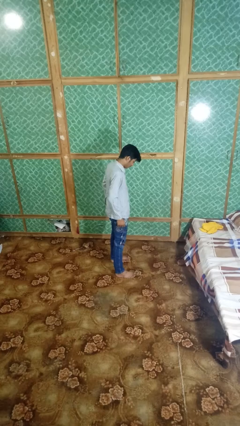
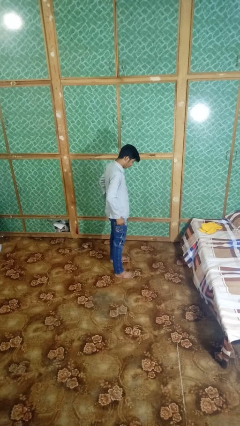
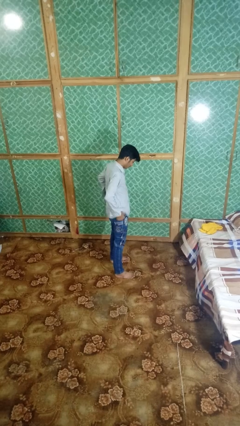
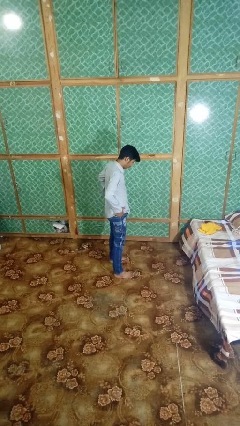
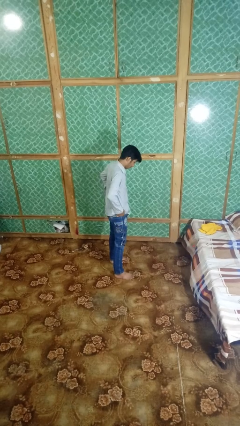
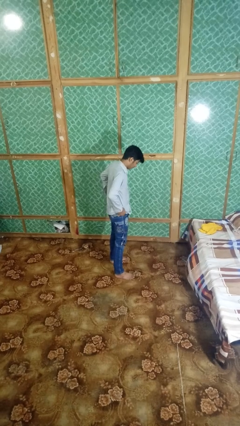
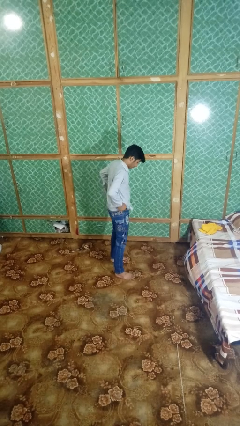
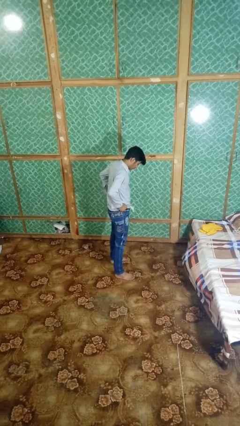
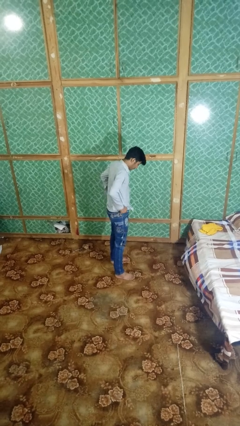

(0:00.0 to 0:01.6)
person hikes up pants

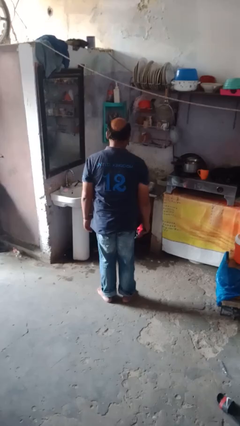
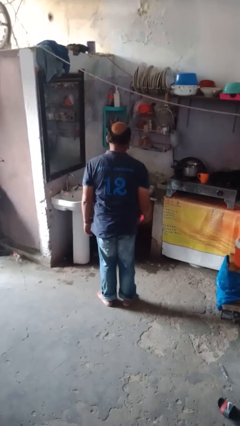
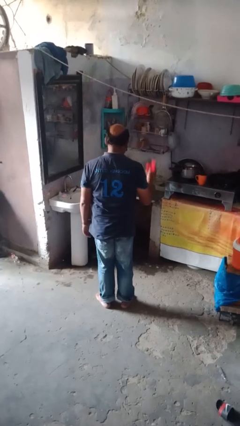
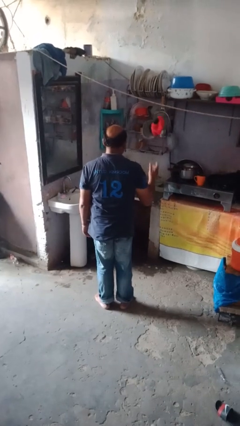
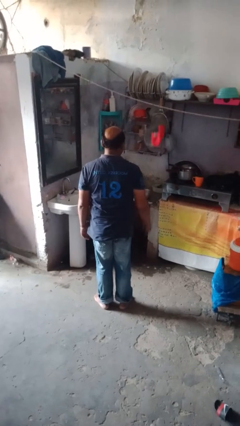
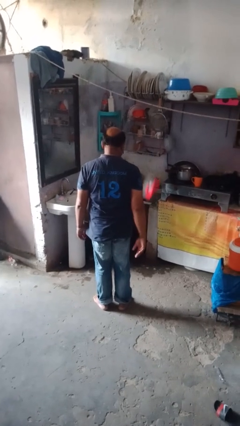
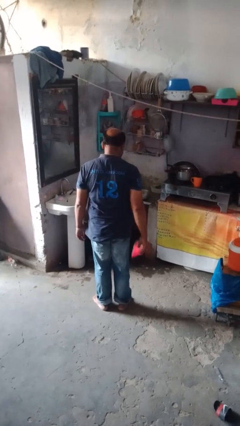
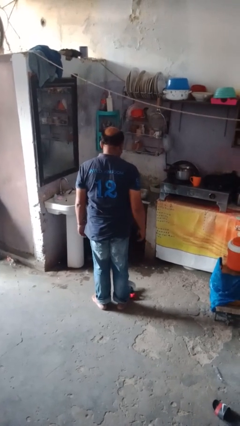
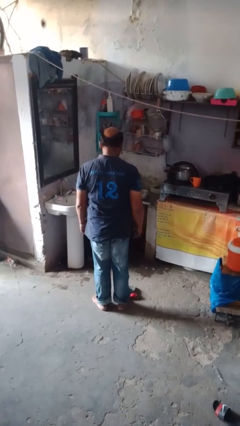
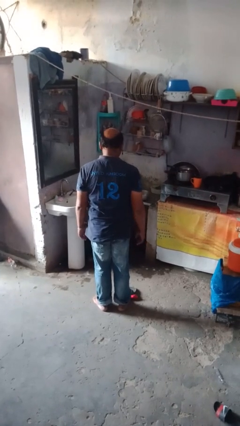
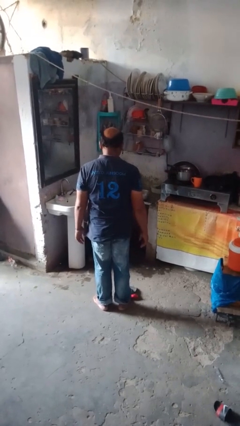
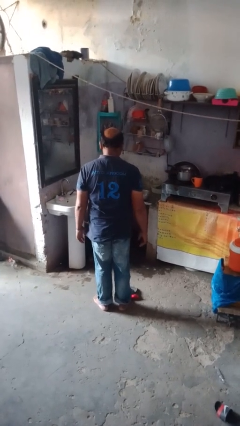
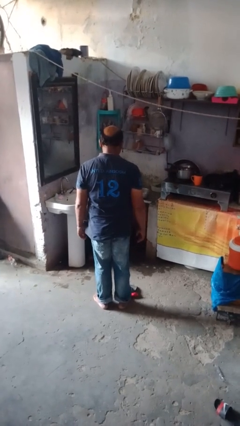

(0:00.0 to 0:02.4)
person throws object into air

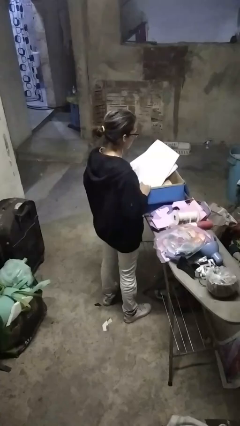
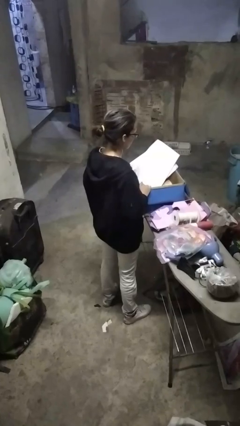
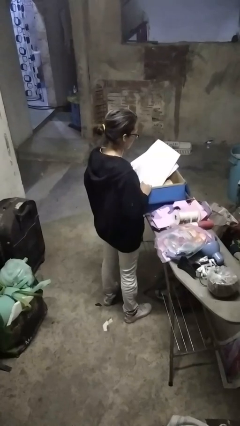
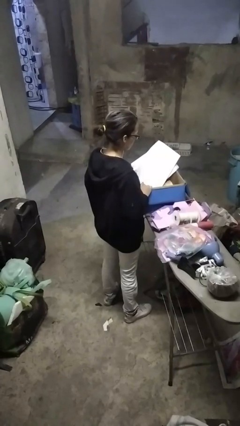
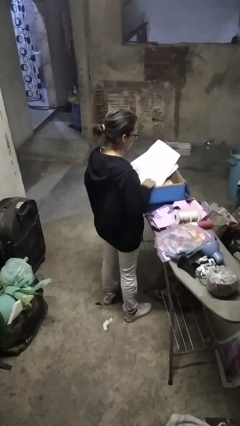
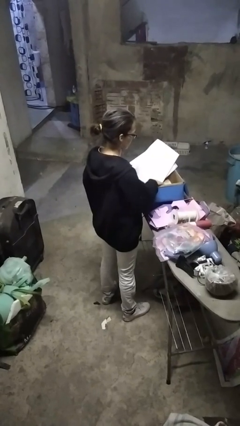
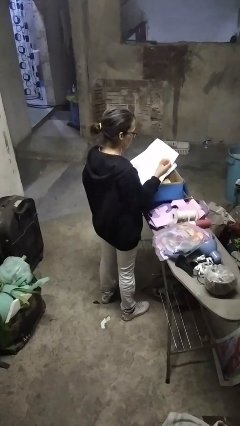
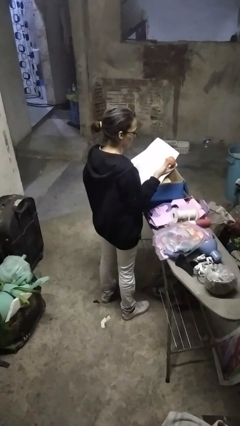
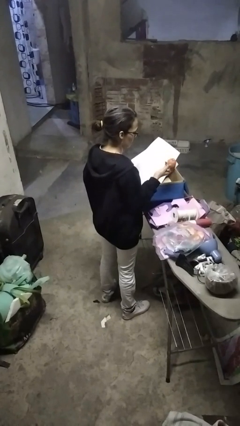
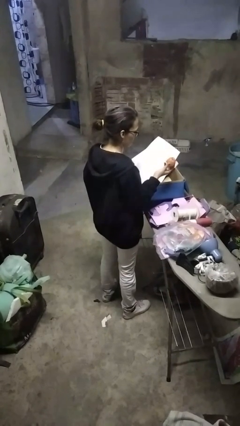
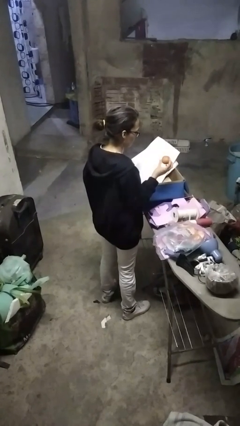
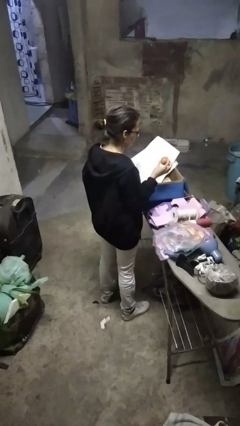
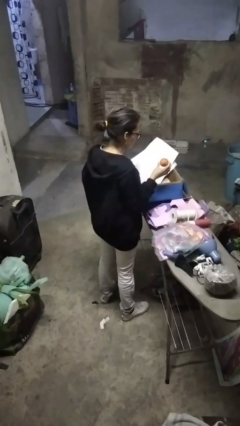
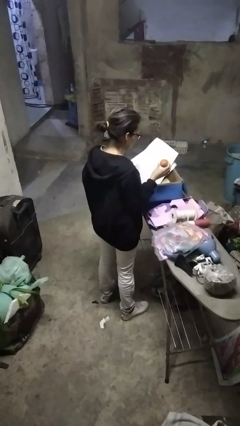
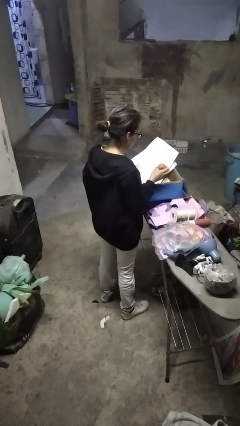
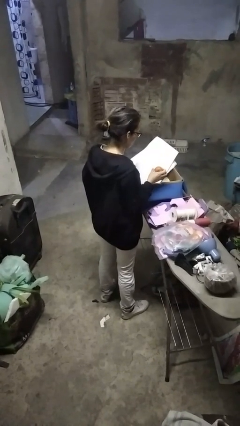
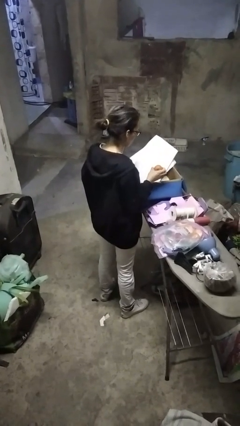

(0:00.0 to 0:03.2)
person takes object from box

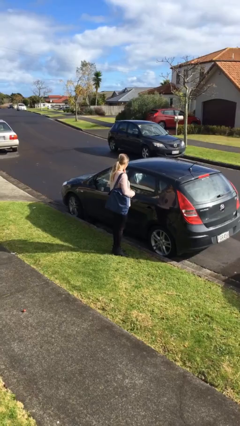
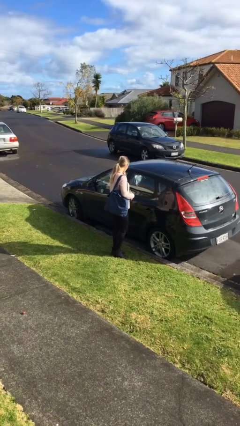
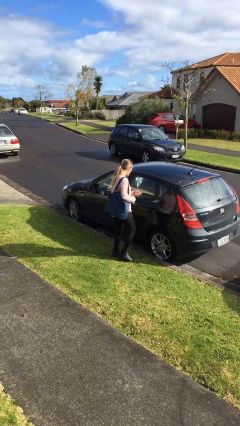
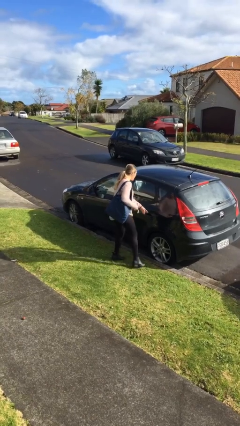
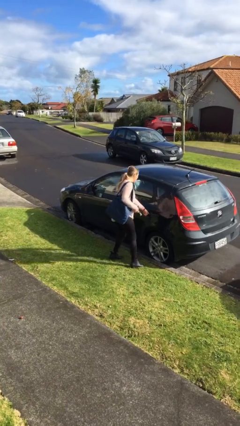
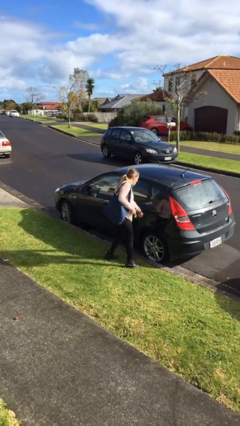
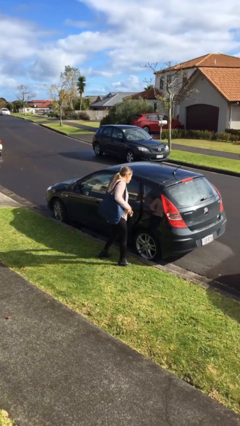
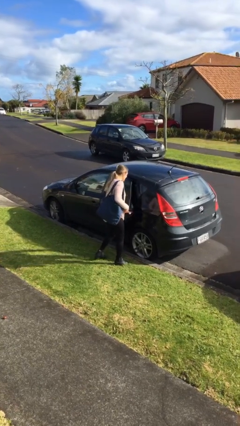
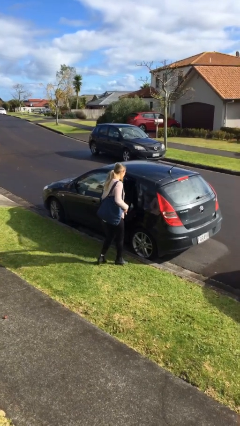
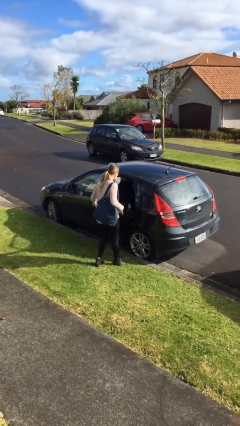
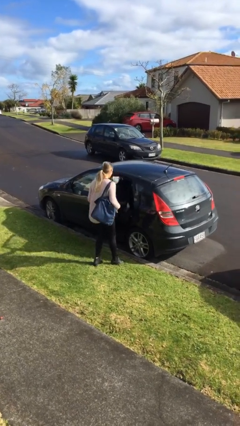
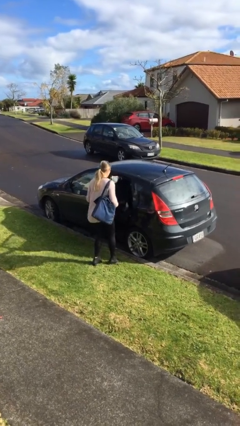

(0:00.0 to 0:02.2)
person opens car door

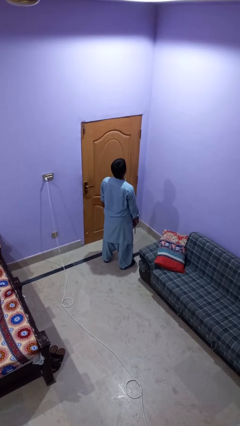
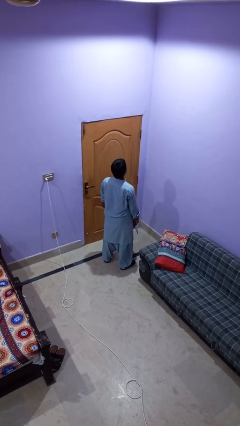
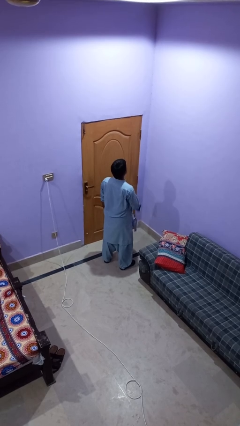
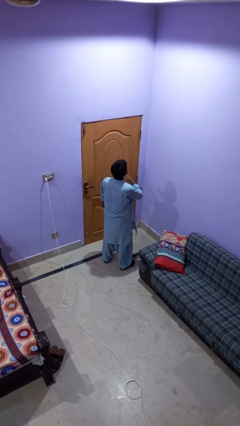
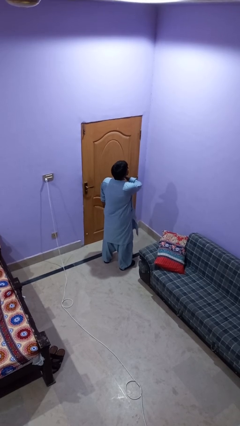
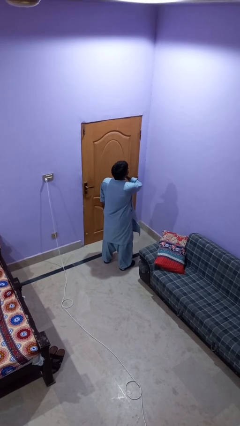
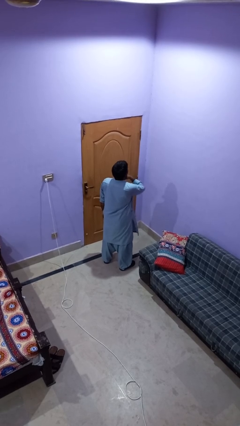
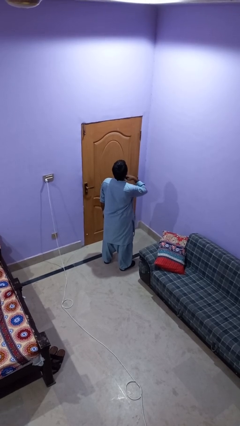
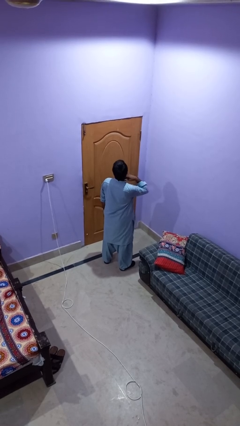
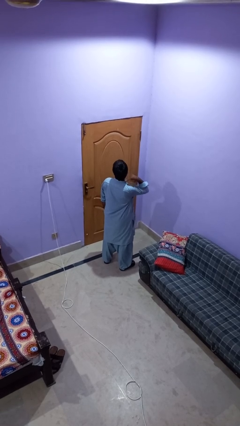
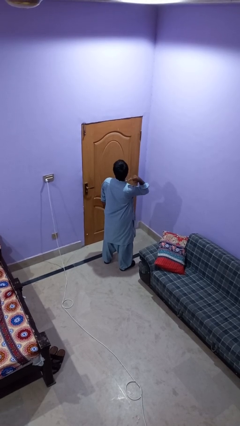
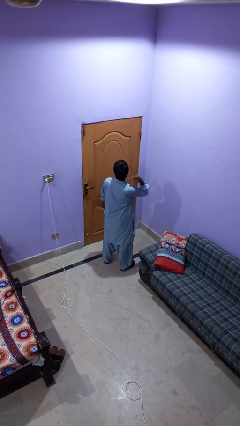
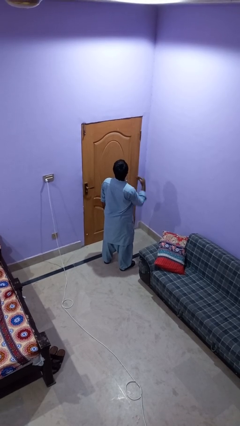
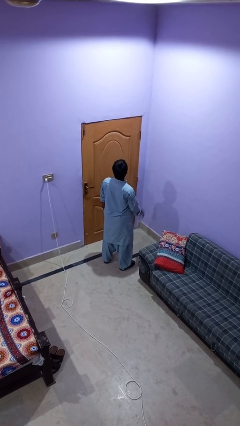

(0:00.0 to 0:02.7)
person gestures cut

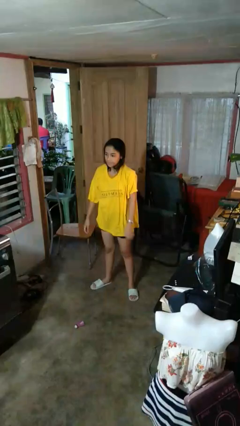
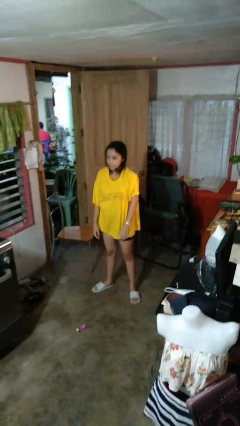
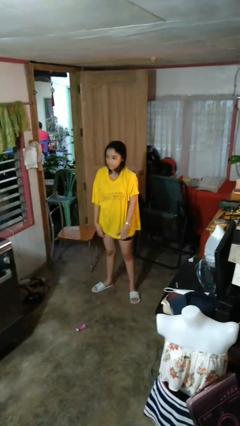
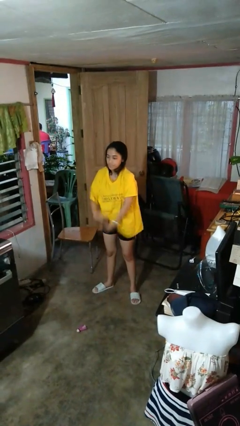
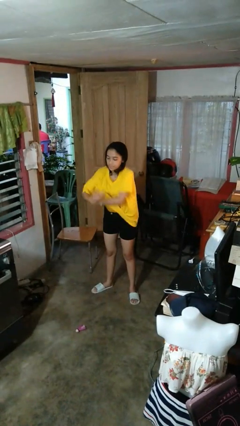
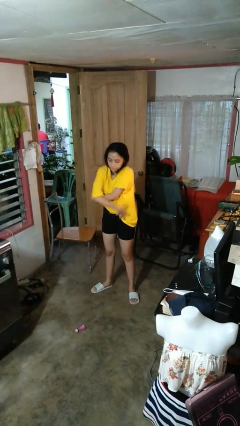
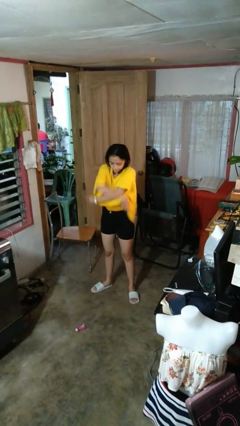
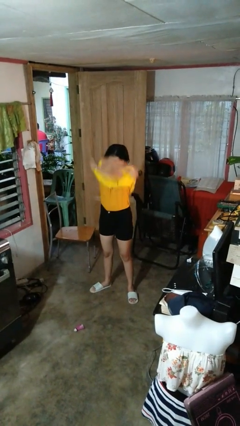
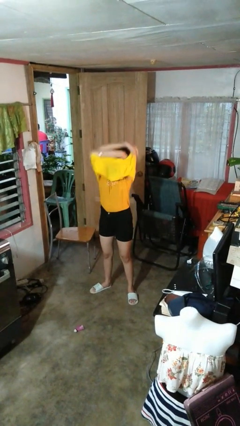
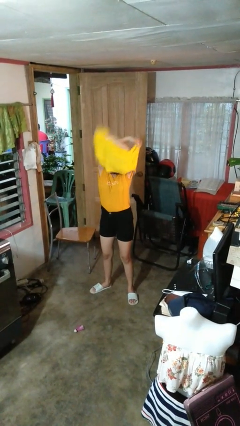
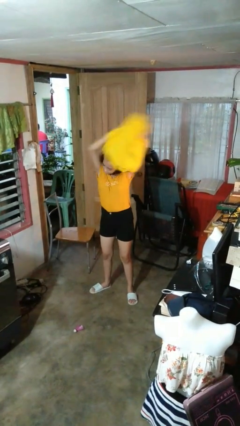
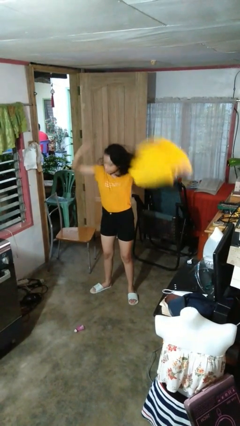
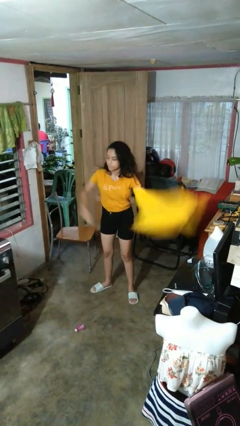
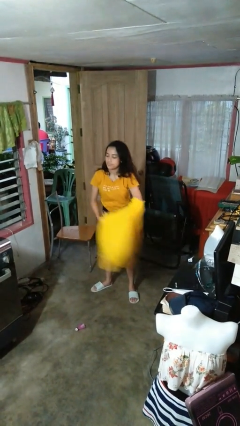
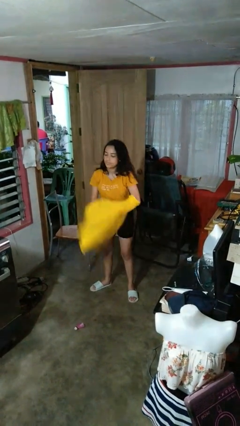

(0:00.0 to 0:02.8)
person takes off shirt

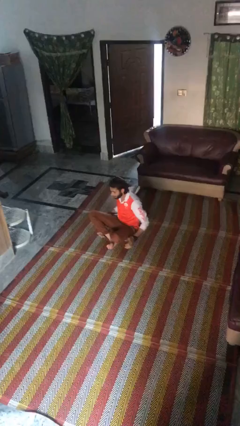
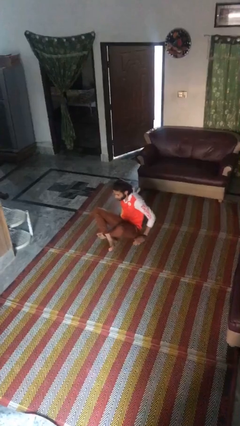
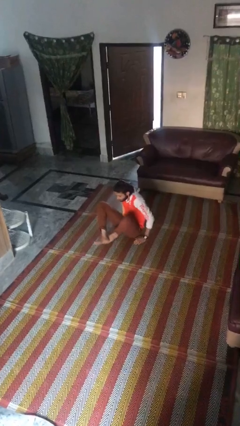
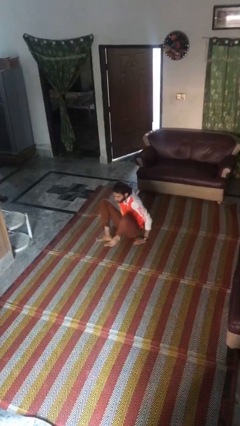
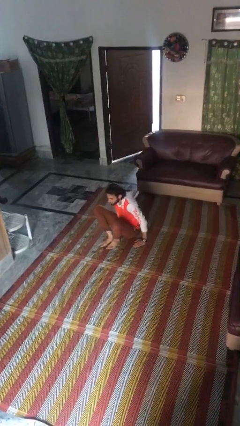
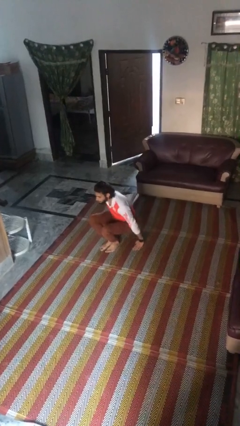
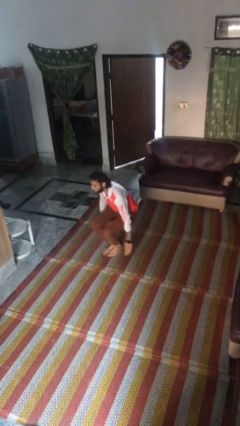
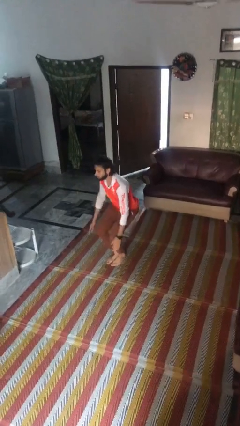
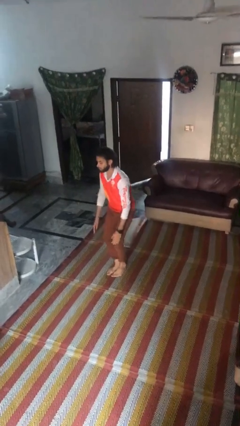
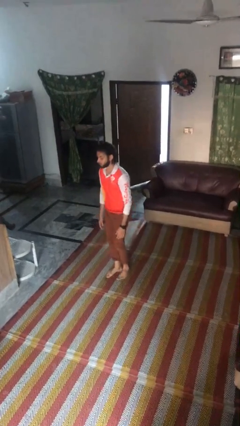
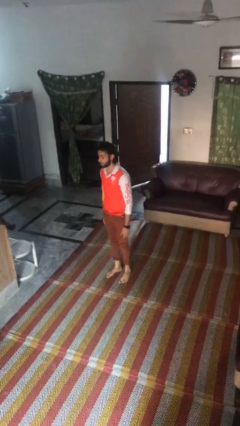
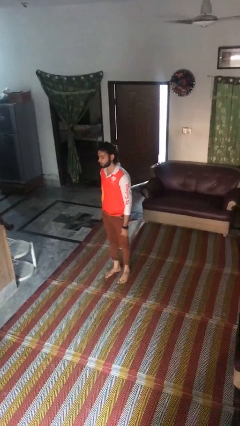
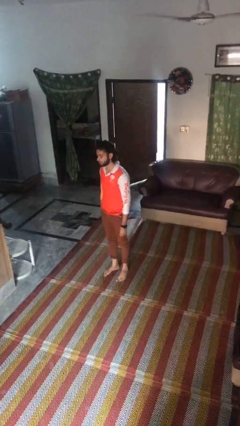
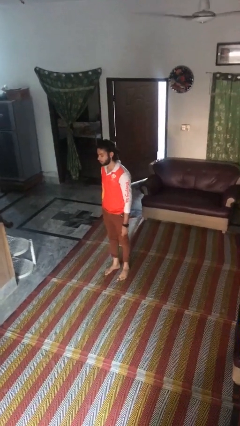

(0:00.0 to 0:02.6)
person stands up from floor
